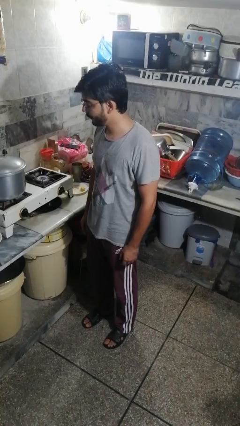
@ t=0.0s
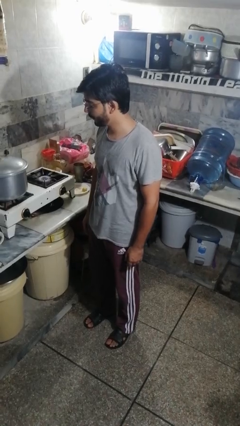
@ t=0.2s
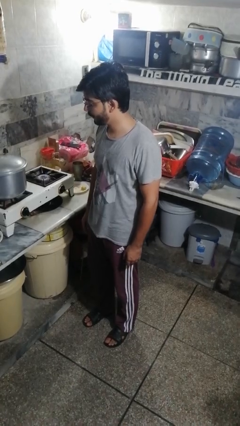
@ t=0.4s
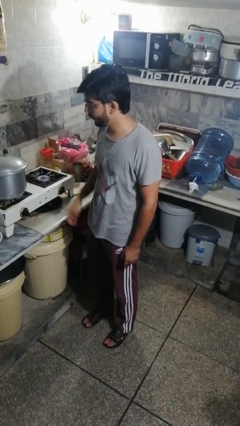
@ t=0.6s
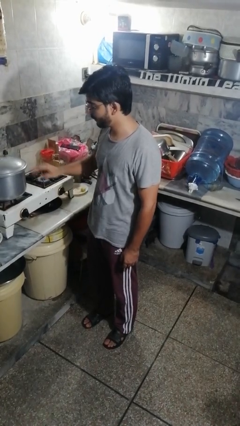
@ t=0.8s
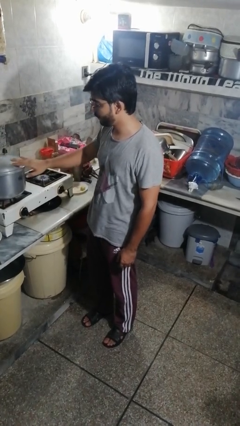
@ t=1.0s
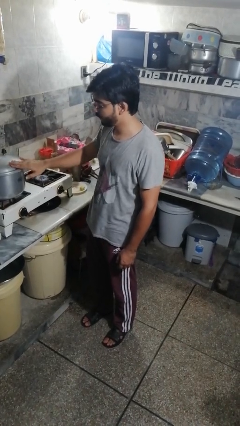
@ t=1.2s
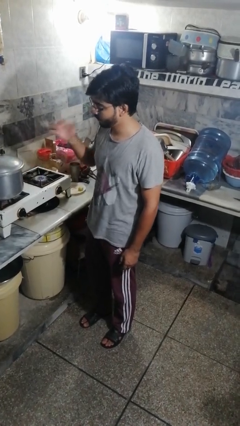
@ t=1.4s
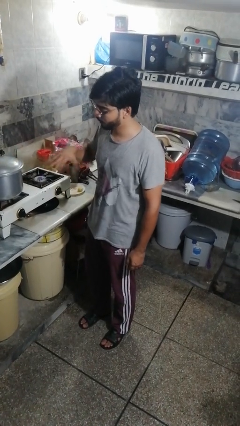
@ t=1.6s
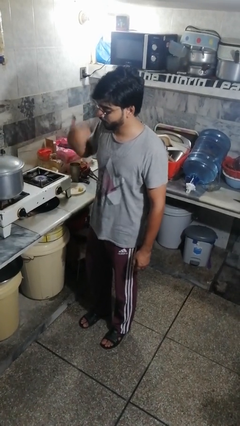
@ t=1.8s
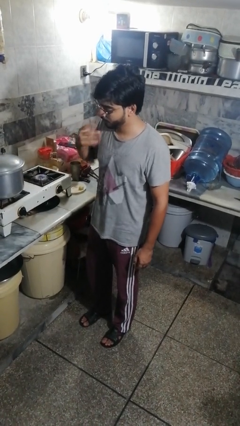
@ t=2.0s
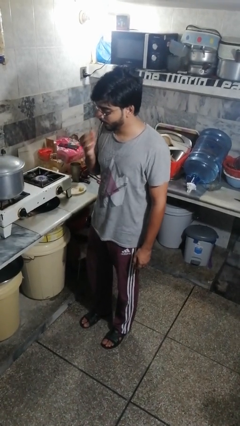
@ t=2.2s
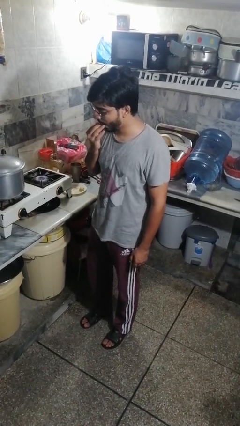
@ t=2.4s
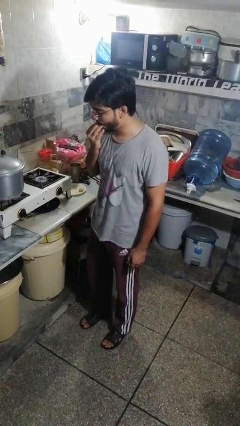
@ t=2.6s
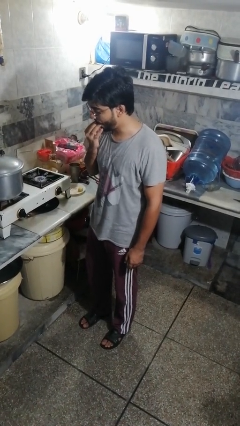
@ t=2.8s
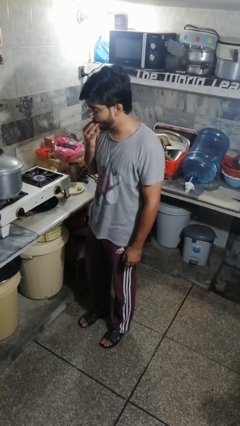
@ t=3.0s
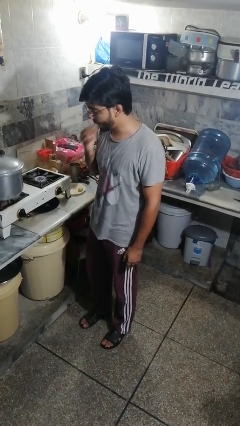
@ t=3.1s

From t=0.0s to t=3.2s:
person burns hand

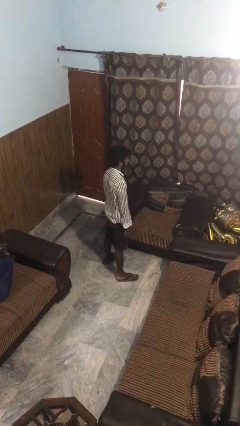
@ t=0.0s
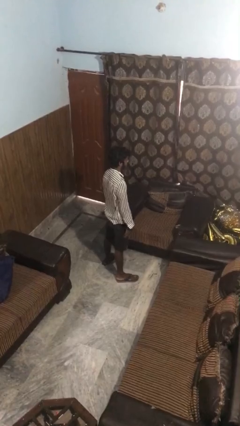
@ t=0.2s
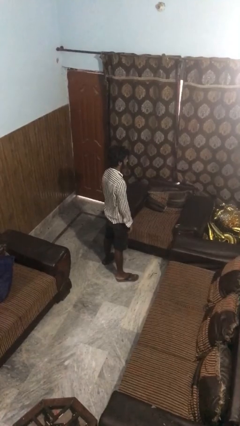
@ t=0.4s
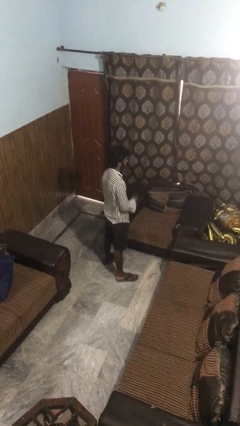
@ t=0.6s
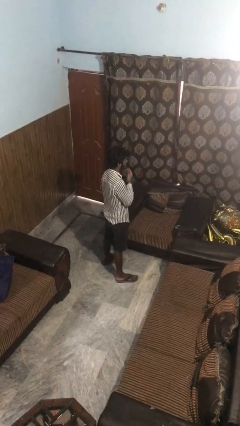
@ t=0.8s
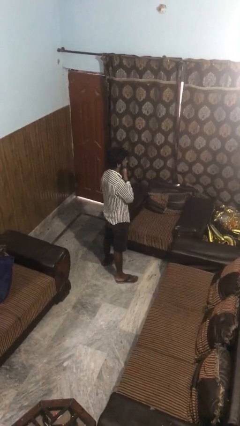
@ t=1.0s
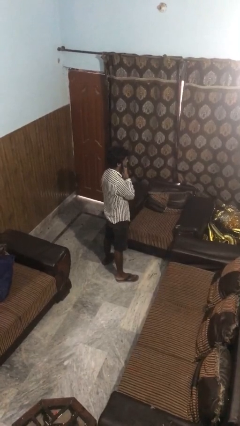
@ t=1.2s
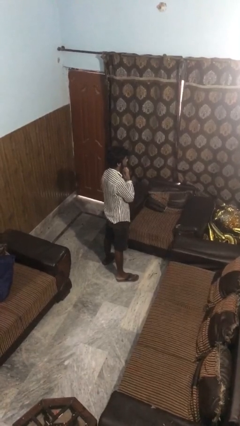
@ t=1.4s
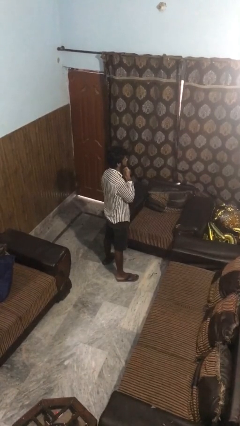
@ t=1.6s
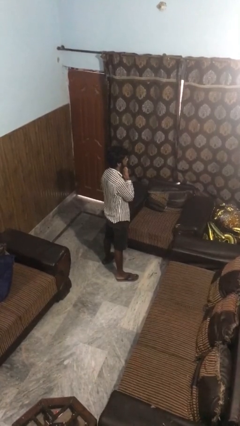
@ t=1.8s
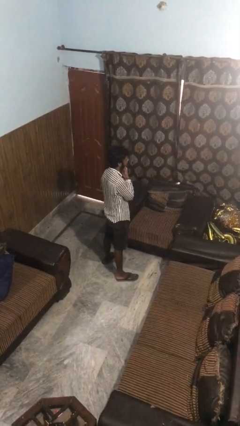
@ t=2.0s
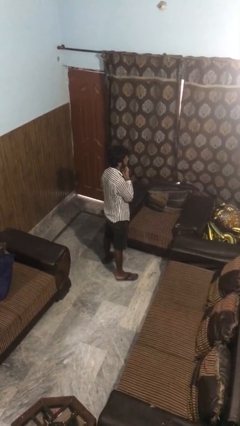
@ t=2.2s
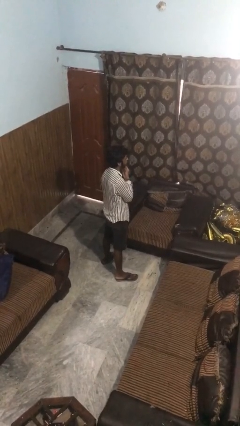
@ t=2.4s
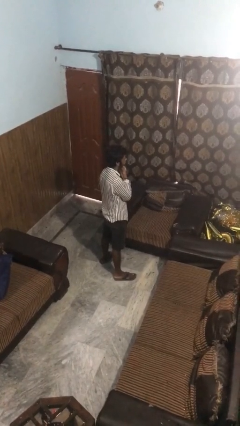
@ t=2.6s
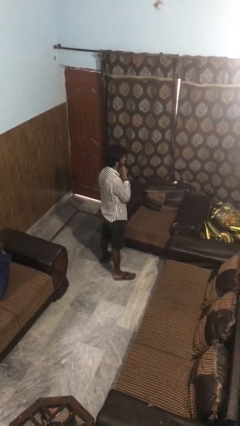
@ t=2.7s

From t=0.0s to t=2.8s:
person strokes chin

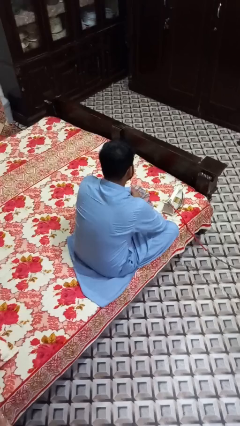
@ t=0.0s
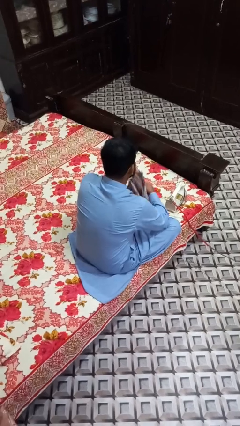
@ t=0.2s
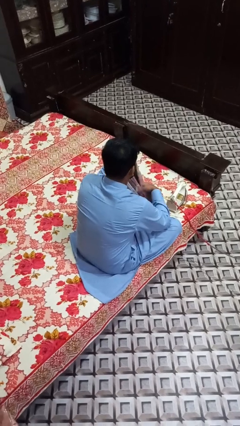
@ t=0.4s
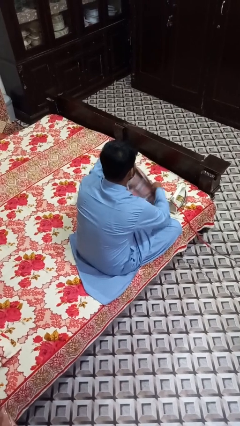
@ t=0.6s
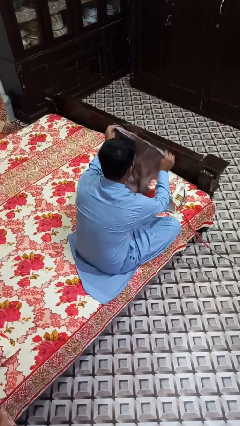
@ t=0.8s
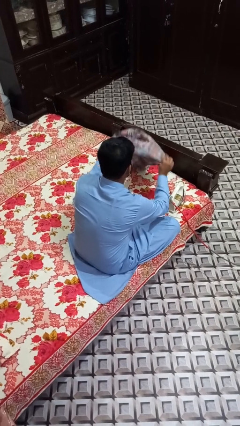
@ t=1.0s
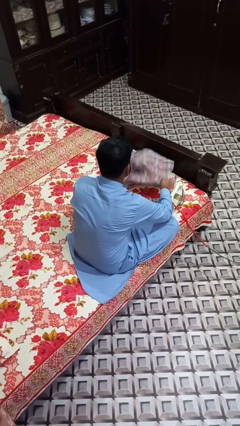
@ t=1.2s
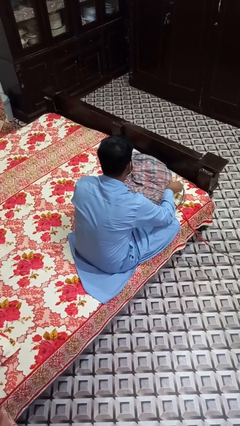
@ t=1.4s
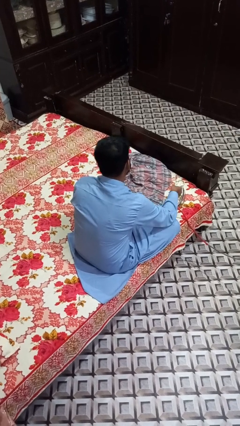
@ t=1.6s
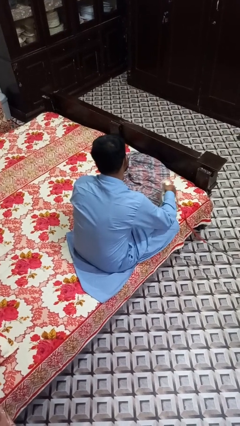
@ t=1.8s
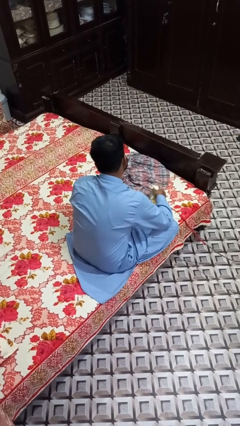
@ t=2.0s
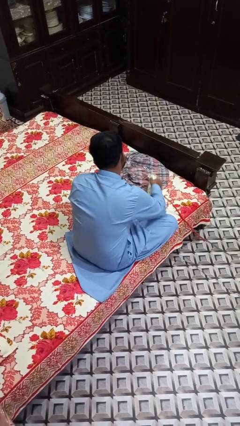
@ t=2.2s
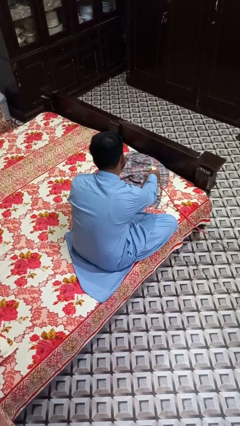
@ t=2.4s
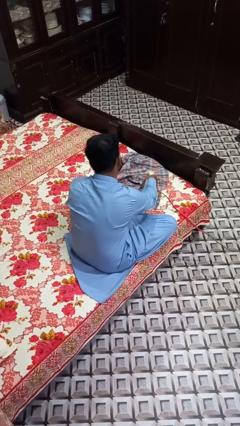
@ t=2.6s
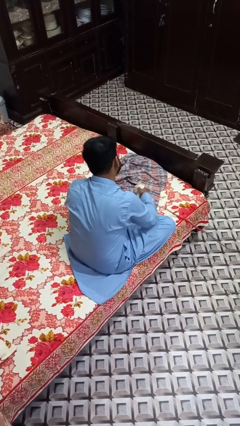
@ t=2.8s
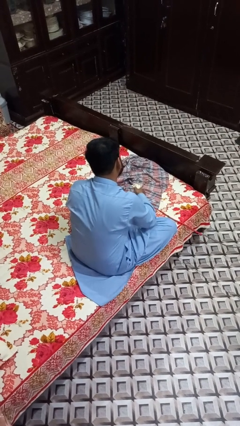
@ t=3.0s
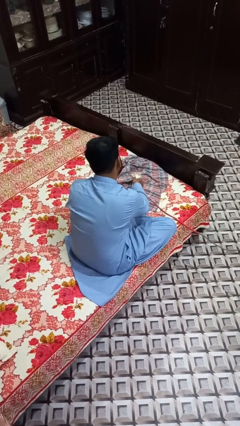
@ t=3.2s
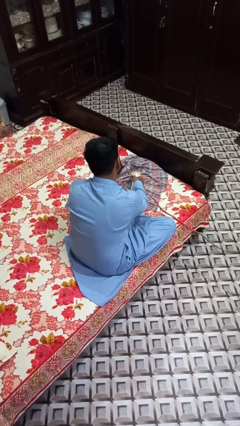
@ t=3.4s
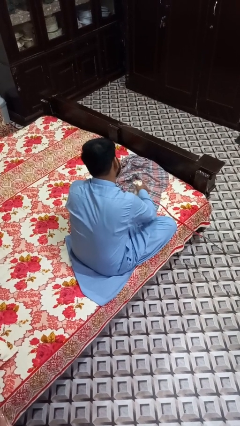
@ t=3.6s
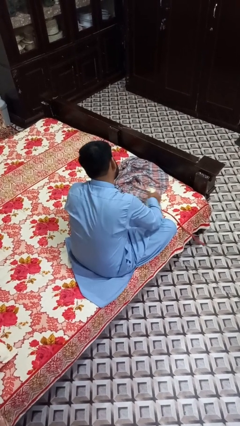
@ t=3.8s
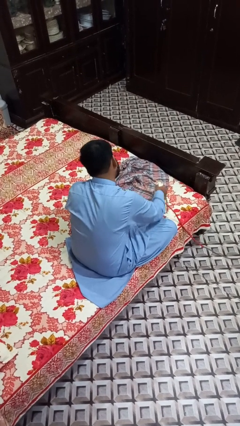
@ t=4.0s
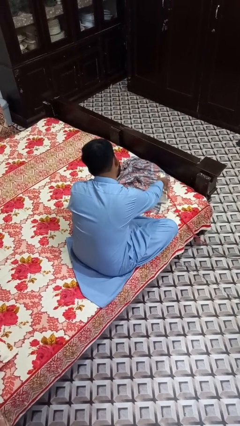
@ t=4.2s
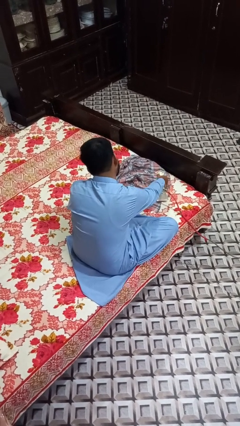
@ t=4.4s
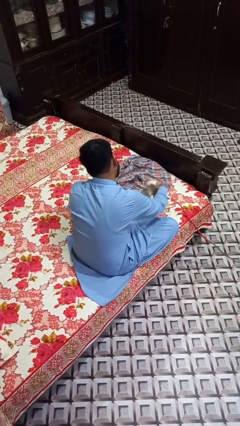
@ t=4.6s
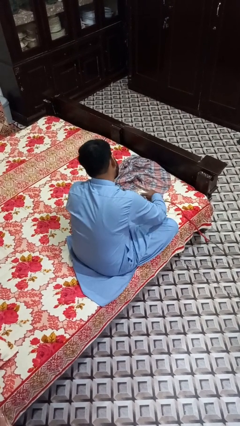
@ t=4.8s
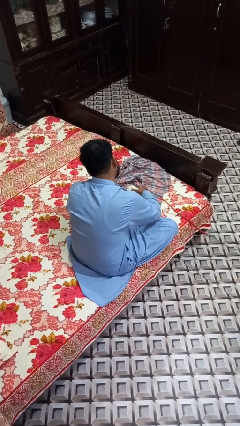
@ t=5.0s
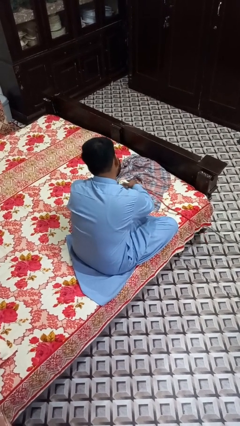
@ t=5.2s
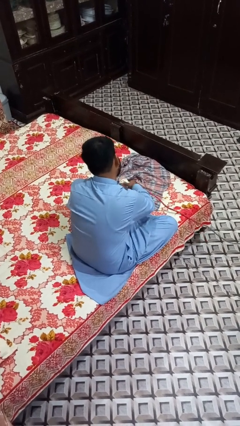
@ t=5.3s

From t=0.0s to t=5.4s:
person irons clothes

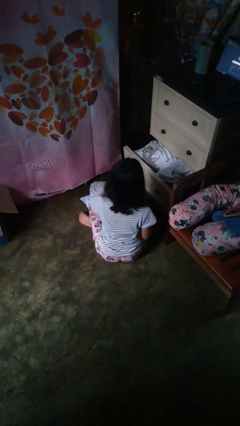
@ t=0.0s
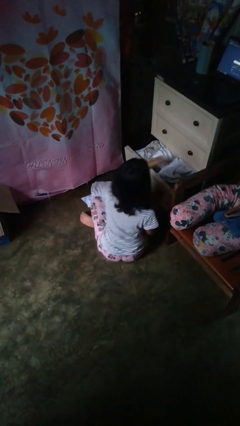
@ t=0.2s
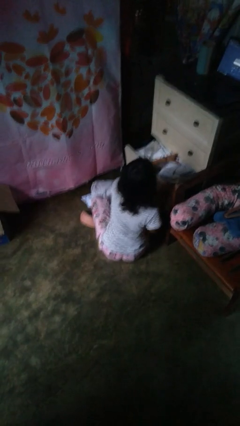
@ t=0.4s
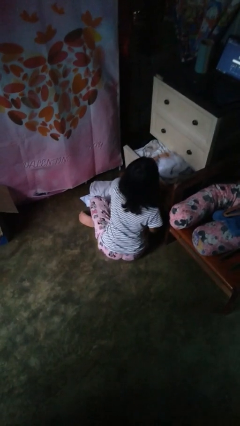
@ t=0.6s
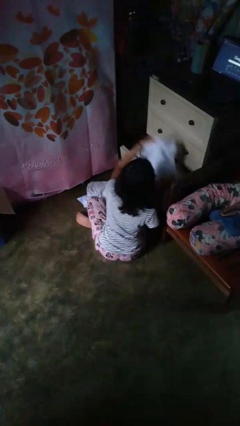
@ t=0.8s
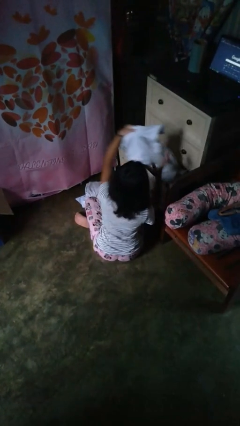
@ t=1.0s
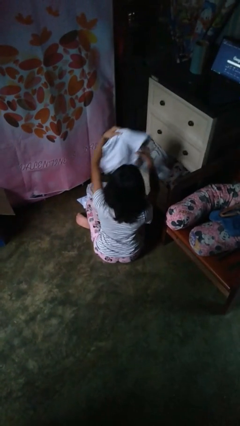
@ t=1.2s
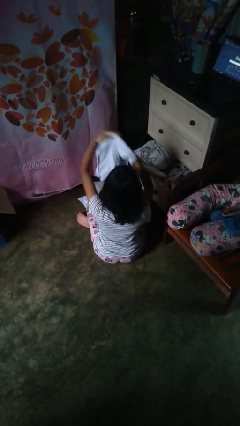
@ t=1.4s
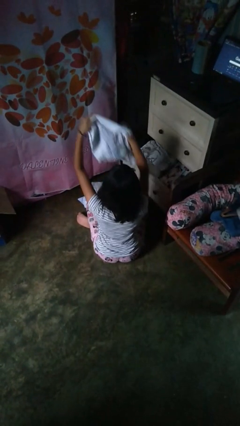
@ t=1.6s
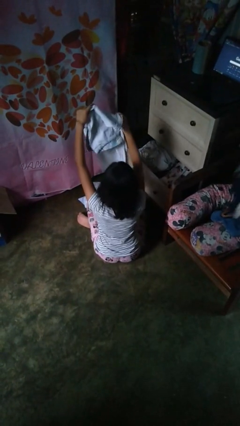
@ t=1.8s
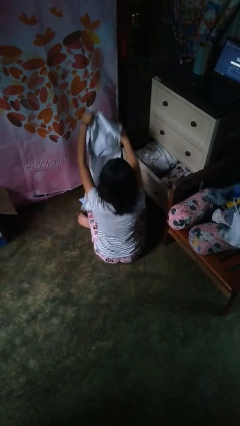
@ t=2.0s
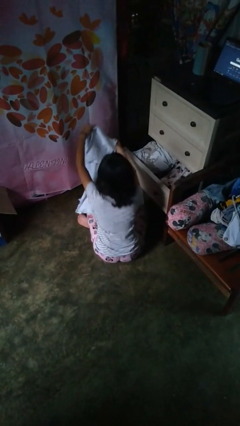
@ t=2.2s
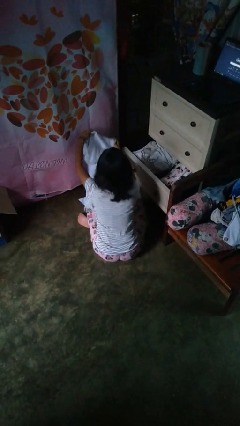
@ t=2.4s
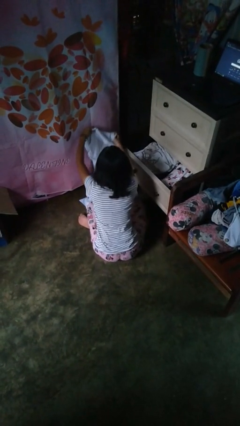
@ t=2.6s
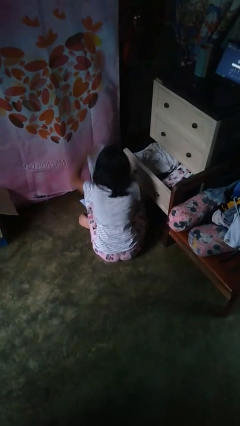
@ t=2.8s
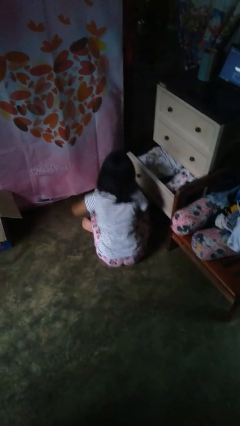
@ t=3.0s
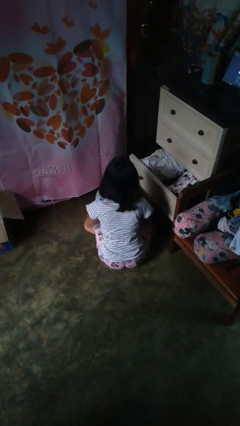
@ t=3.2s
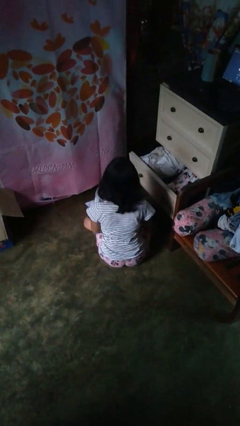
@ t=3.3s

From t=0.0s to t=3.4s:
person takes clothes from dresser

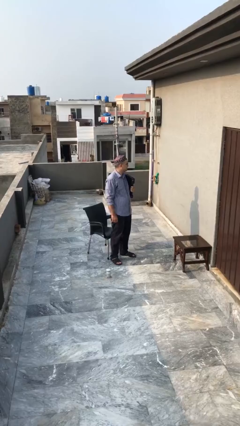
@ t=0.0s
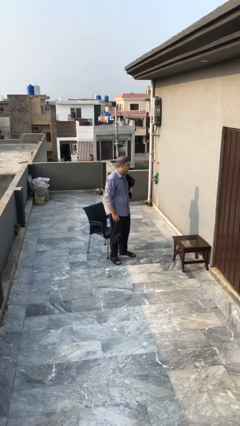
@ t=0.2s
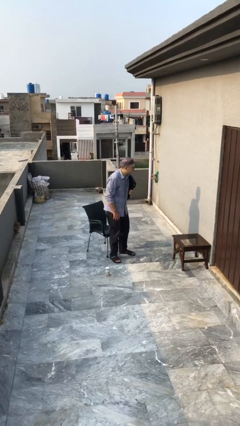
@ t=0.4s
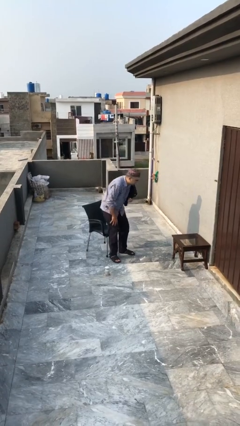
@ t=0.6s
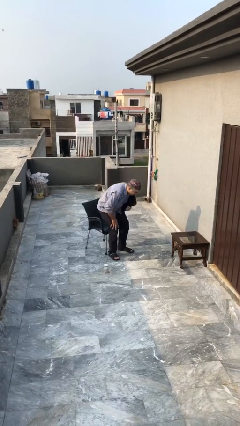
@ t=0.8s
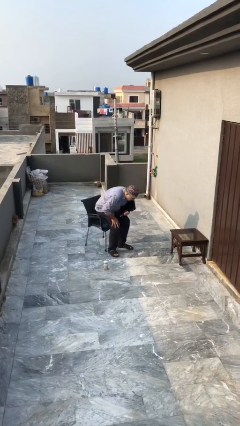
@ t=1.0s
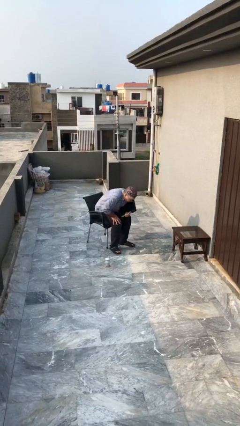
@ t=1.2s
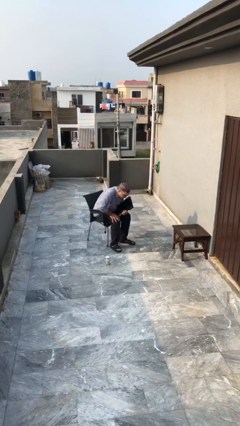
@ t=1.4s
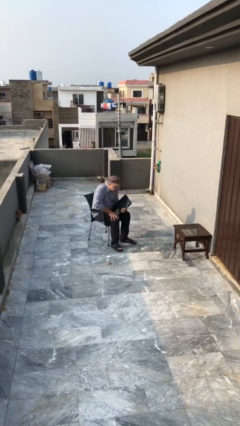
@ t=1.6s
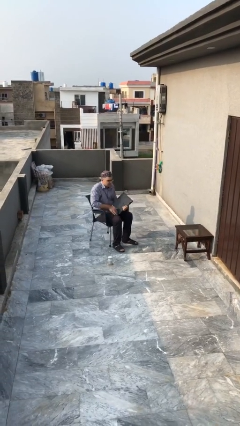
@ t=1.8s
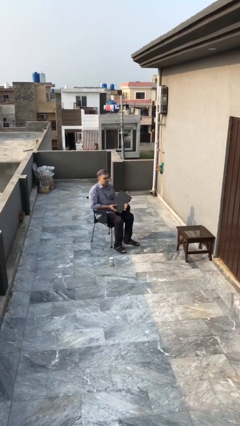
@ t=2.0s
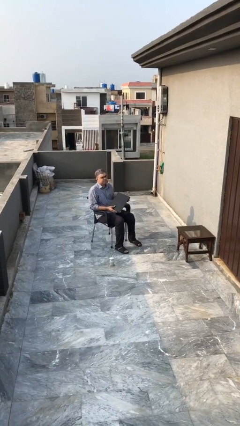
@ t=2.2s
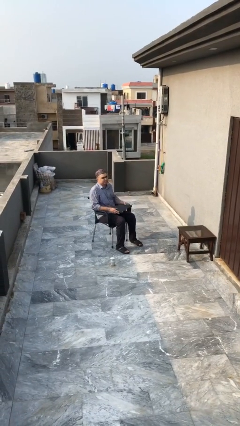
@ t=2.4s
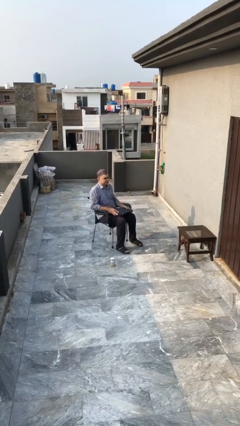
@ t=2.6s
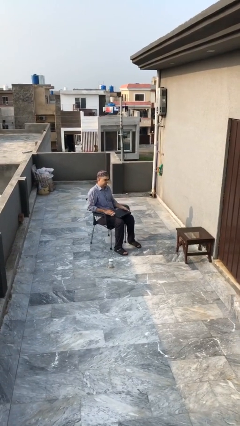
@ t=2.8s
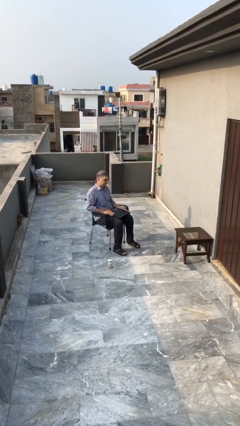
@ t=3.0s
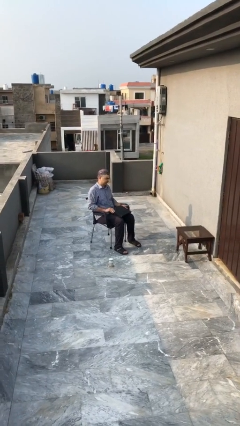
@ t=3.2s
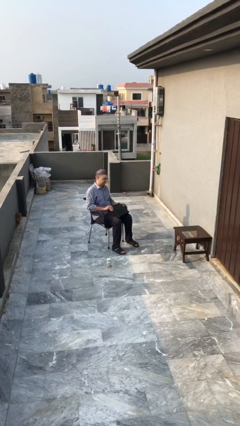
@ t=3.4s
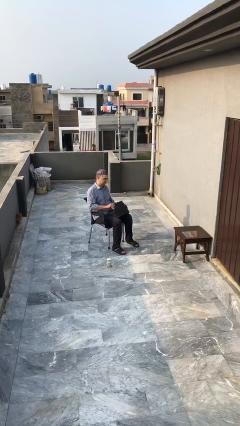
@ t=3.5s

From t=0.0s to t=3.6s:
person sits down
